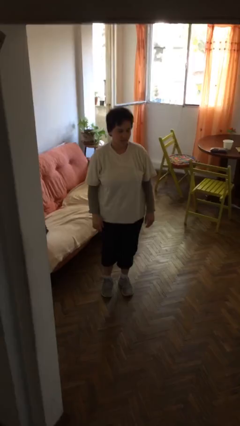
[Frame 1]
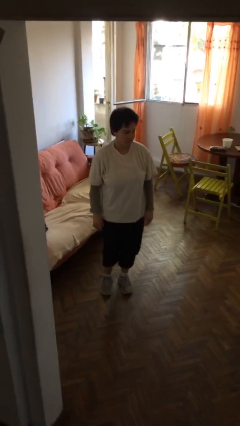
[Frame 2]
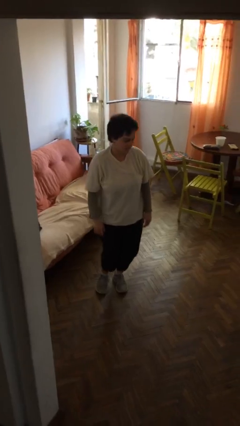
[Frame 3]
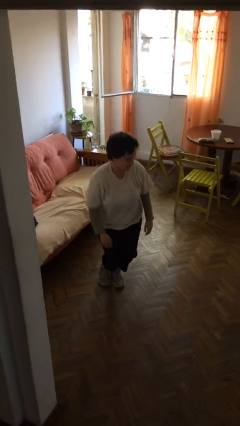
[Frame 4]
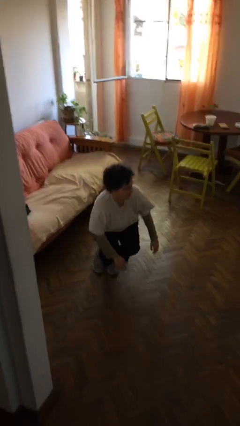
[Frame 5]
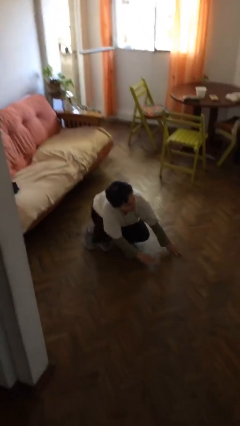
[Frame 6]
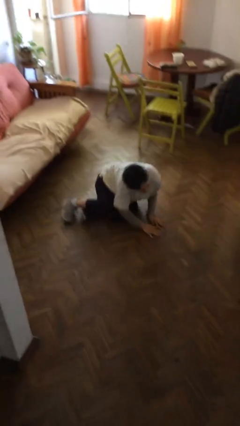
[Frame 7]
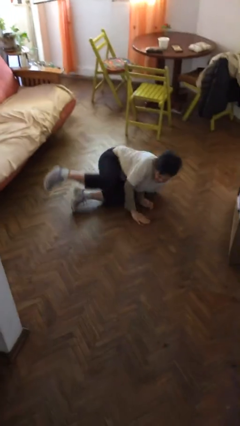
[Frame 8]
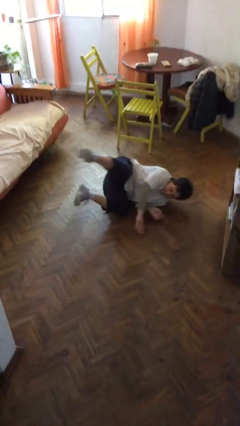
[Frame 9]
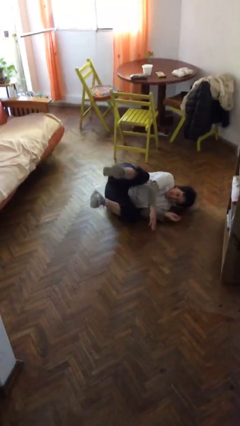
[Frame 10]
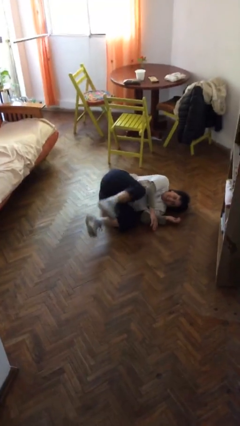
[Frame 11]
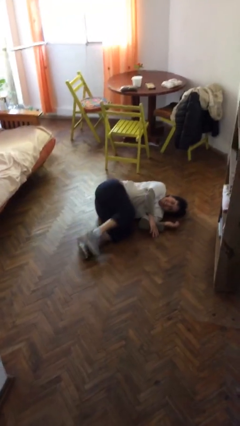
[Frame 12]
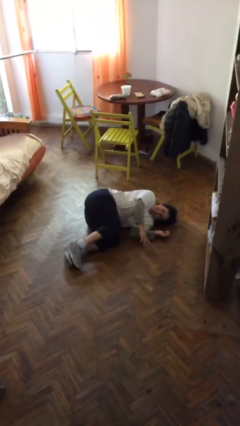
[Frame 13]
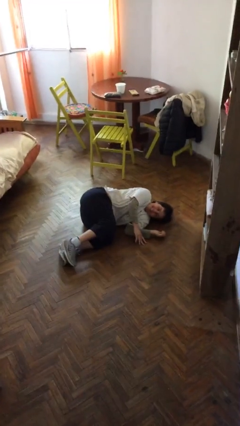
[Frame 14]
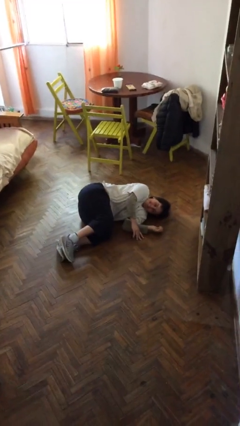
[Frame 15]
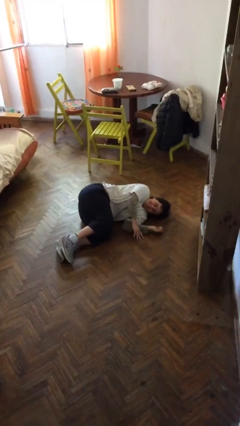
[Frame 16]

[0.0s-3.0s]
person falls while standing

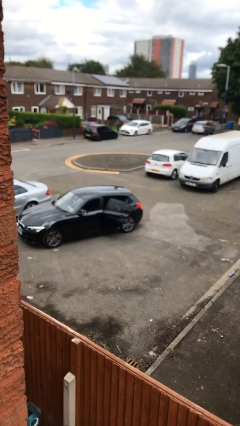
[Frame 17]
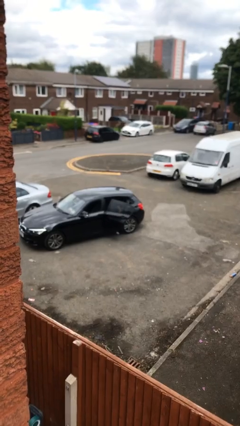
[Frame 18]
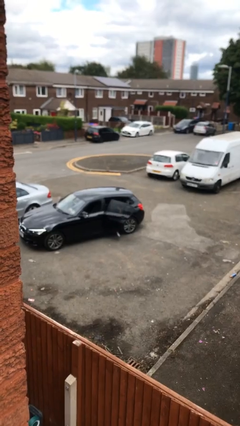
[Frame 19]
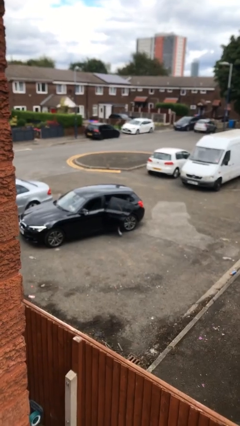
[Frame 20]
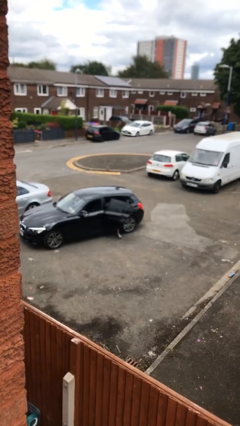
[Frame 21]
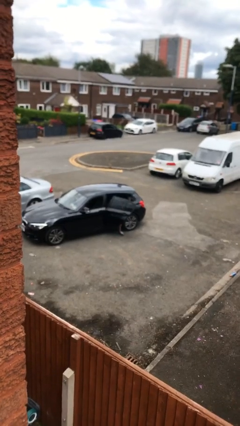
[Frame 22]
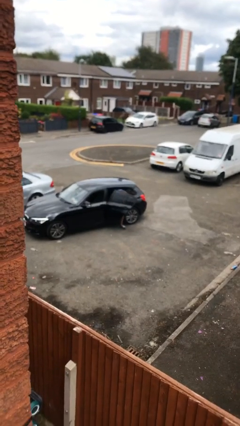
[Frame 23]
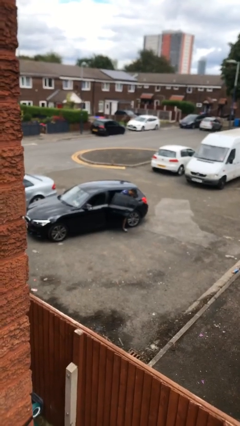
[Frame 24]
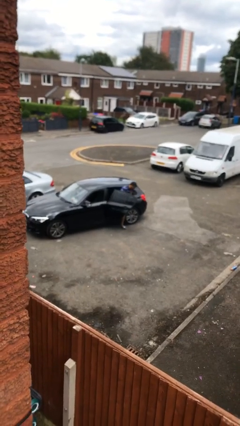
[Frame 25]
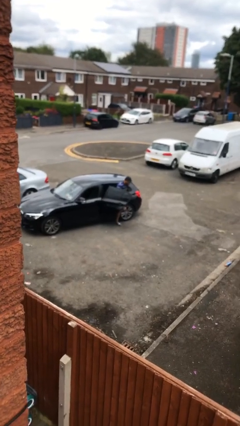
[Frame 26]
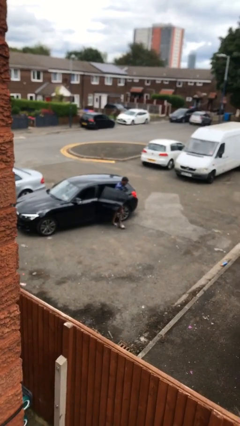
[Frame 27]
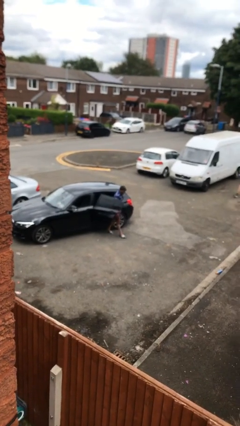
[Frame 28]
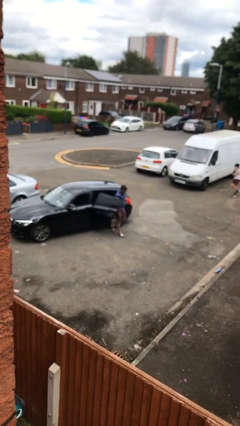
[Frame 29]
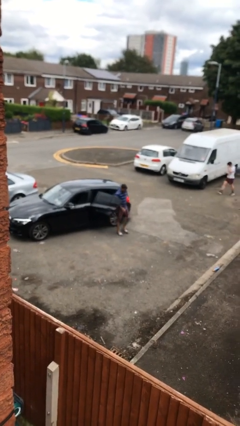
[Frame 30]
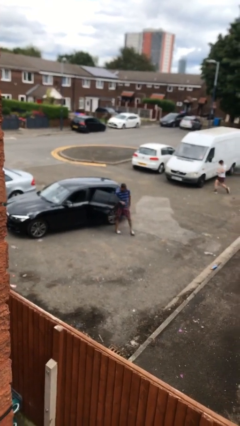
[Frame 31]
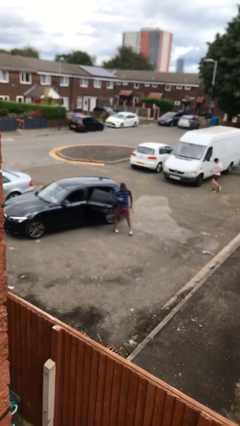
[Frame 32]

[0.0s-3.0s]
person exits car

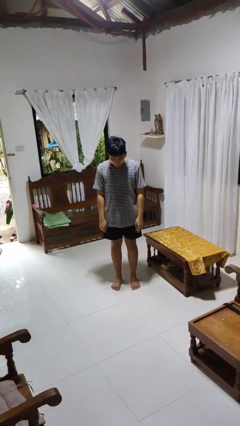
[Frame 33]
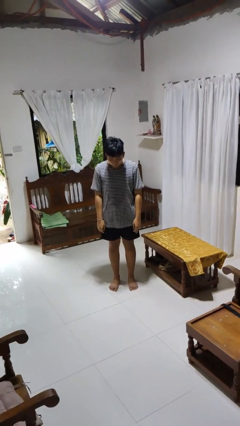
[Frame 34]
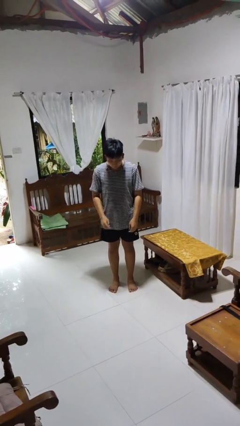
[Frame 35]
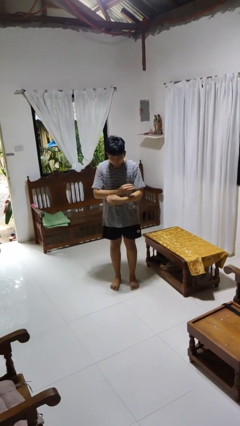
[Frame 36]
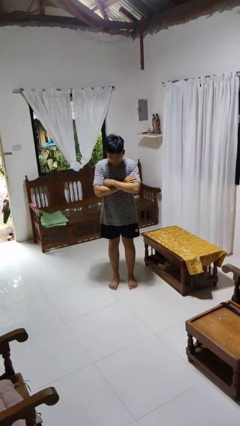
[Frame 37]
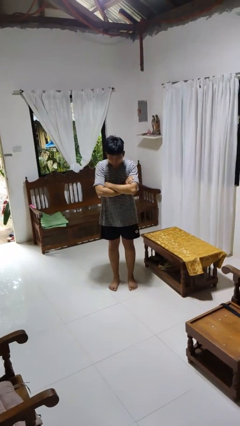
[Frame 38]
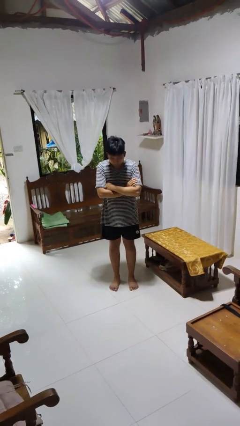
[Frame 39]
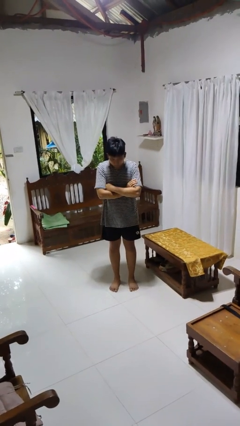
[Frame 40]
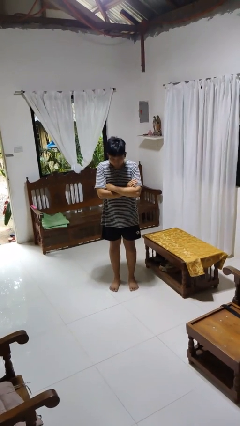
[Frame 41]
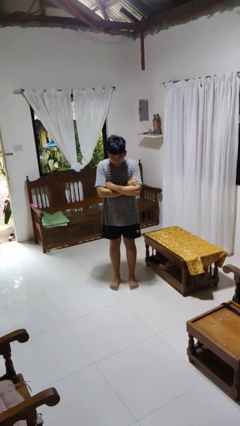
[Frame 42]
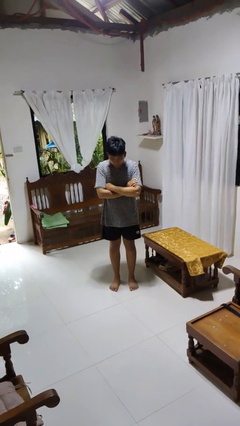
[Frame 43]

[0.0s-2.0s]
person gestures arms x

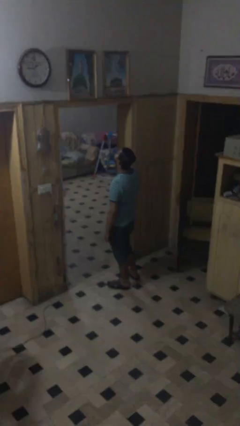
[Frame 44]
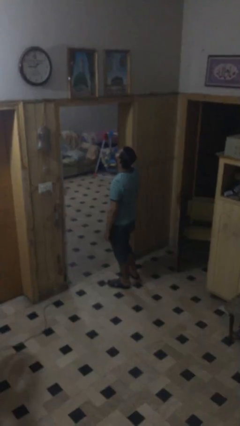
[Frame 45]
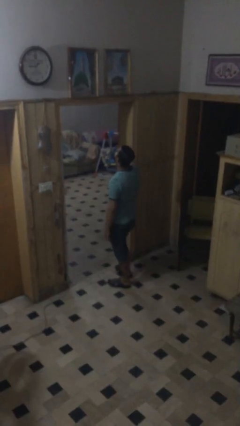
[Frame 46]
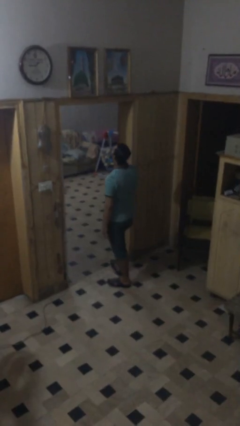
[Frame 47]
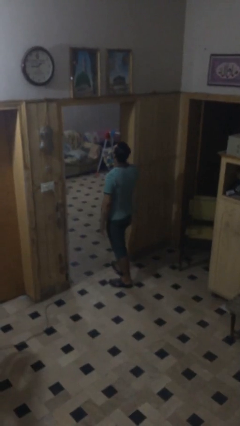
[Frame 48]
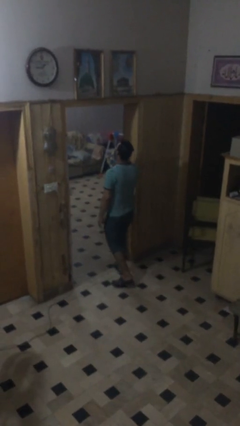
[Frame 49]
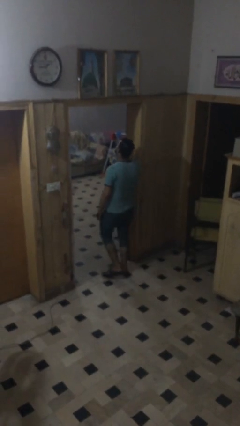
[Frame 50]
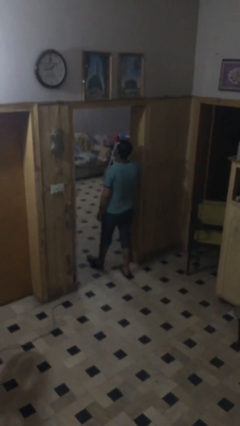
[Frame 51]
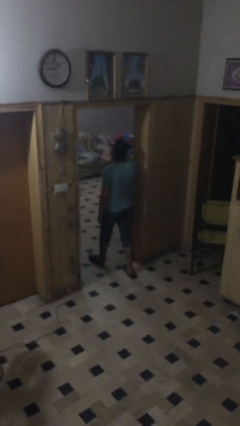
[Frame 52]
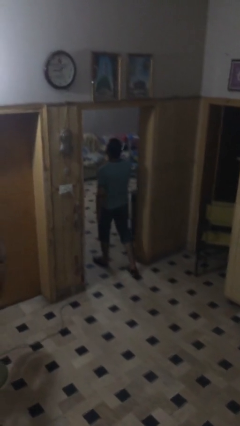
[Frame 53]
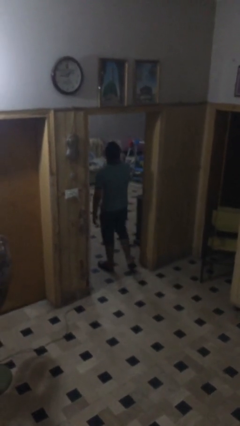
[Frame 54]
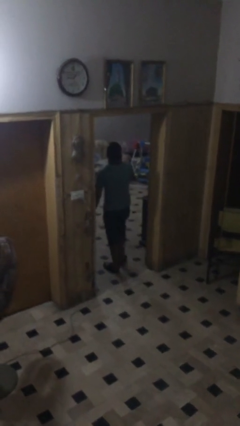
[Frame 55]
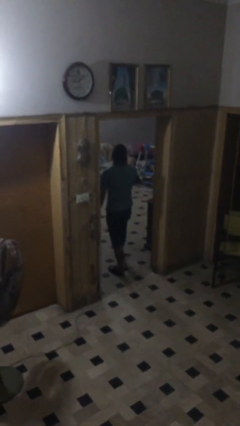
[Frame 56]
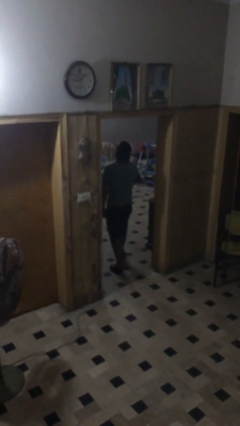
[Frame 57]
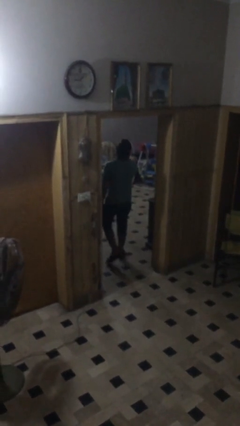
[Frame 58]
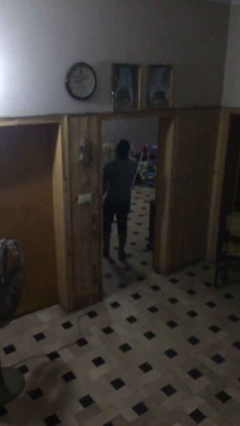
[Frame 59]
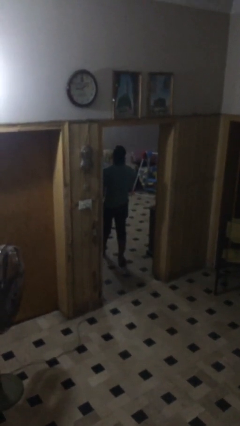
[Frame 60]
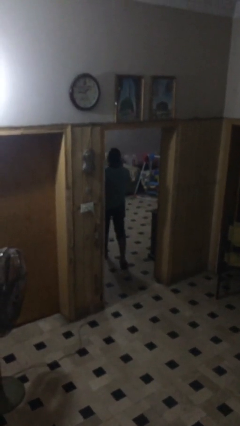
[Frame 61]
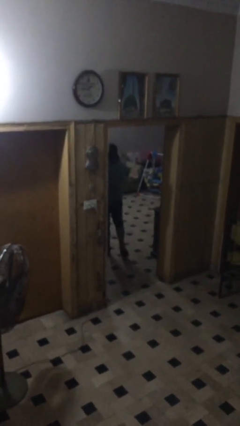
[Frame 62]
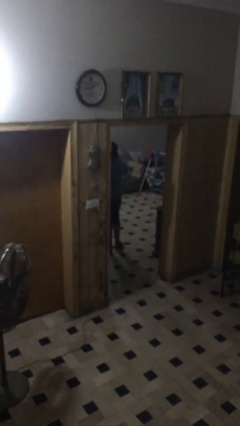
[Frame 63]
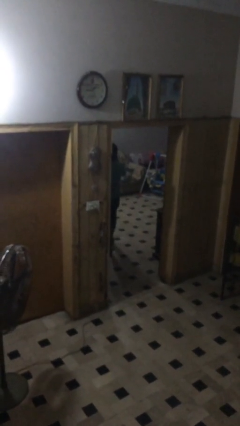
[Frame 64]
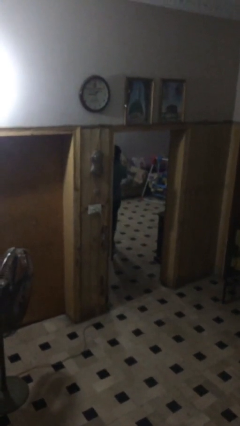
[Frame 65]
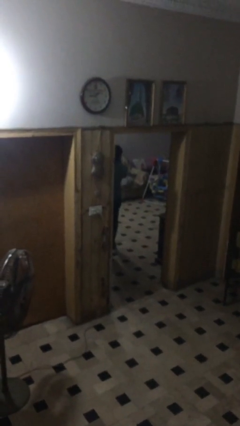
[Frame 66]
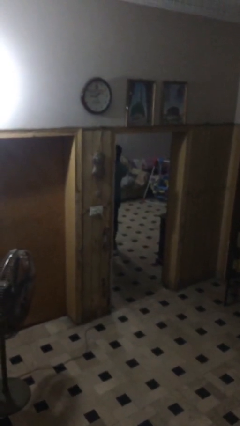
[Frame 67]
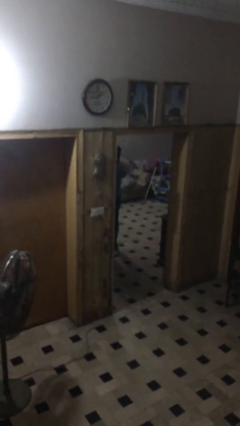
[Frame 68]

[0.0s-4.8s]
person exits scene through structure

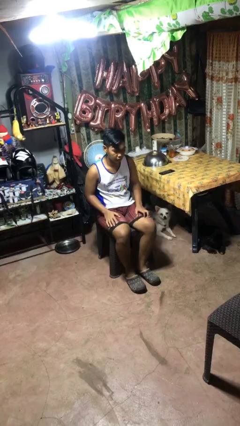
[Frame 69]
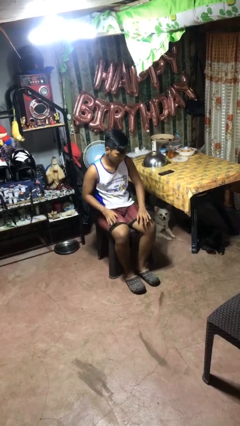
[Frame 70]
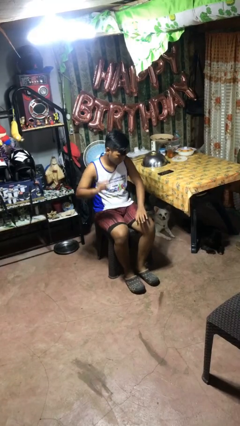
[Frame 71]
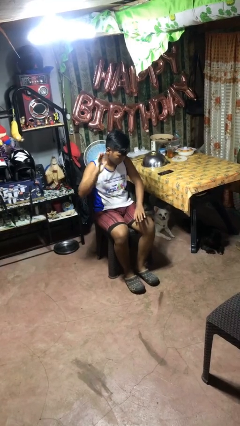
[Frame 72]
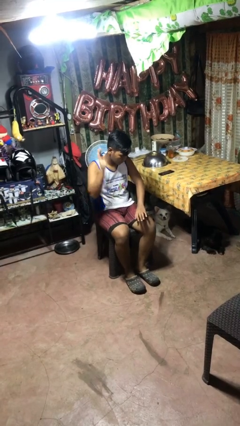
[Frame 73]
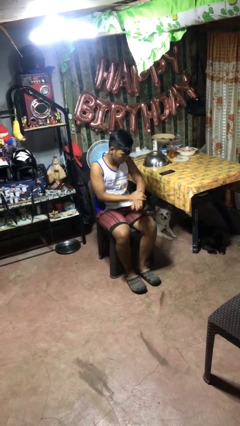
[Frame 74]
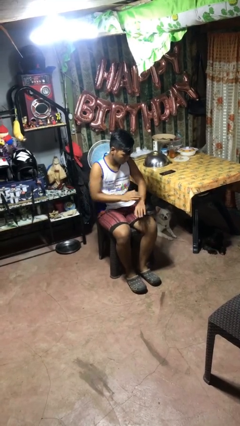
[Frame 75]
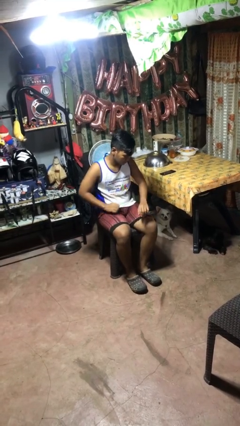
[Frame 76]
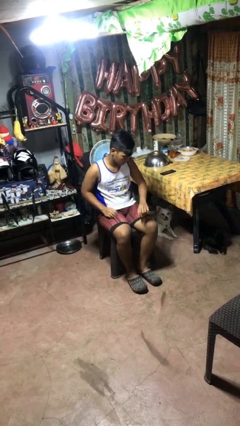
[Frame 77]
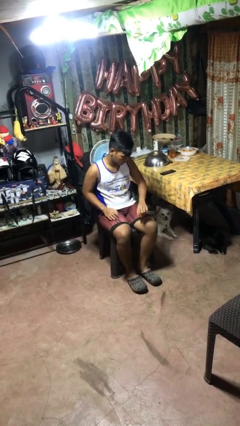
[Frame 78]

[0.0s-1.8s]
person swats bug

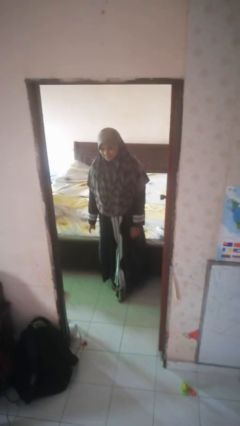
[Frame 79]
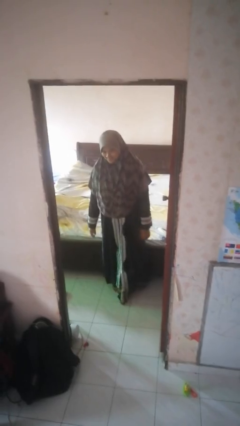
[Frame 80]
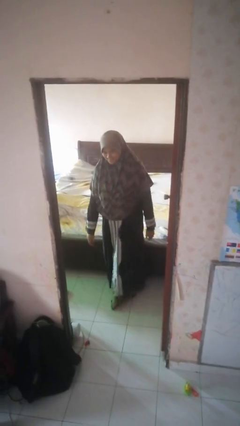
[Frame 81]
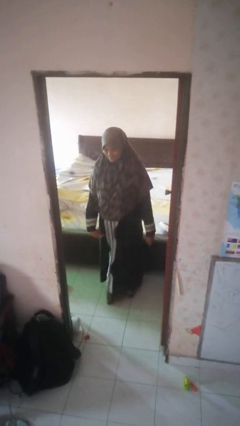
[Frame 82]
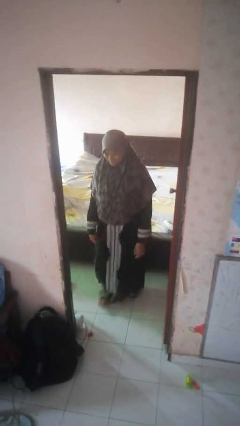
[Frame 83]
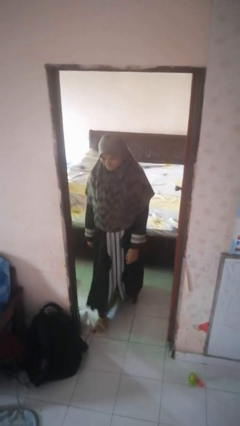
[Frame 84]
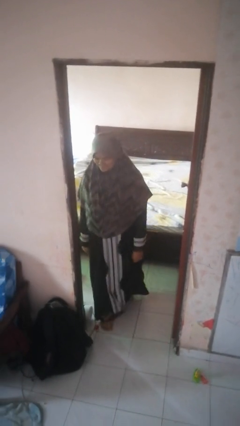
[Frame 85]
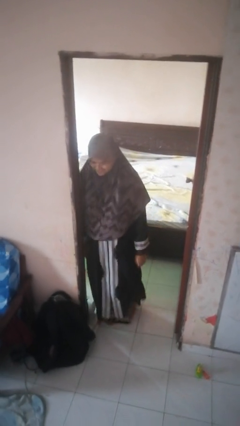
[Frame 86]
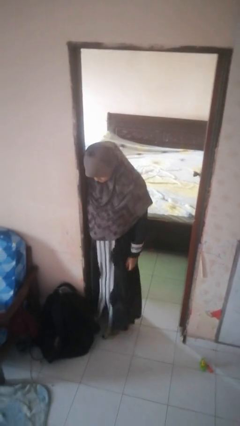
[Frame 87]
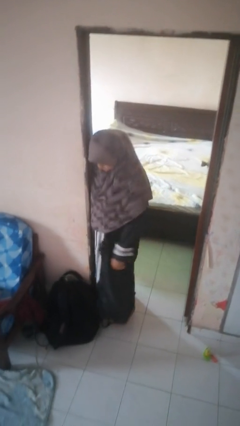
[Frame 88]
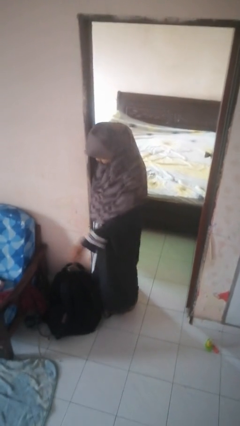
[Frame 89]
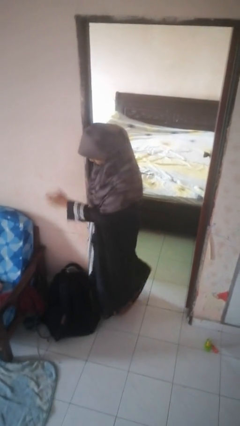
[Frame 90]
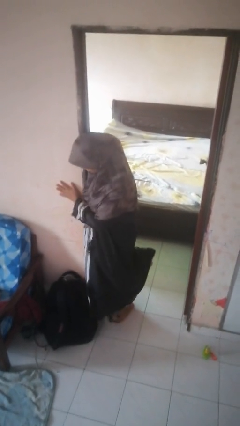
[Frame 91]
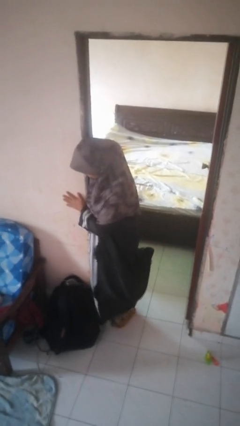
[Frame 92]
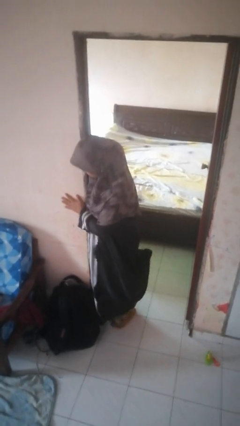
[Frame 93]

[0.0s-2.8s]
person bumps into wall
